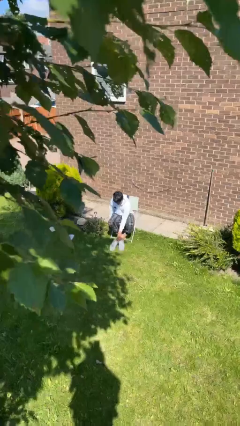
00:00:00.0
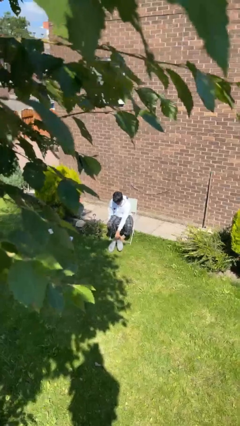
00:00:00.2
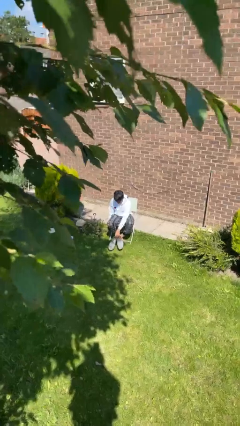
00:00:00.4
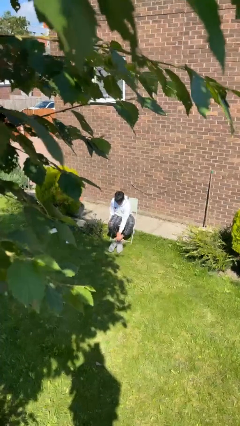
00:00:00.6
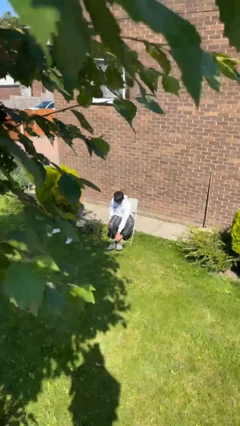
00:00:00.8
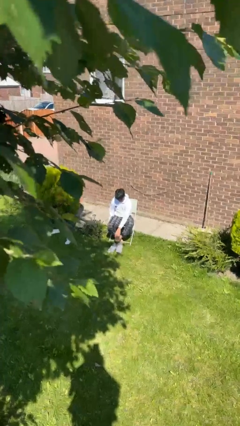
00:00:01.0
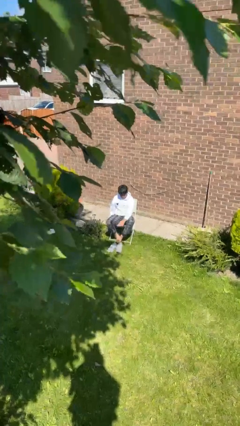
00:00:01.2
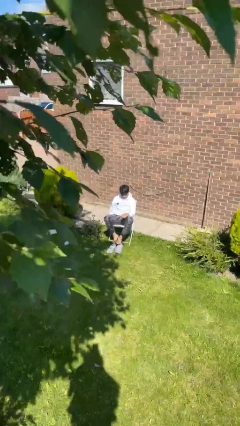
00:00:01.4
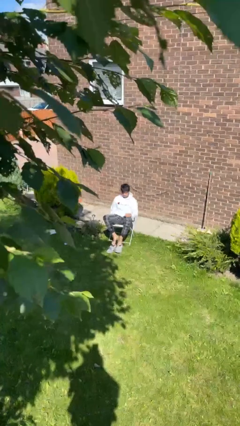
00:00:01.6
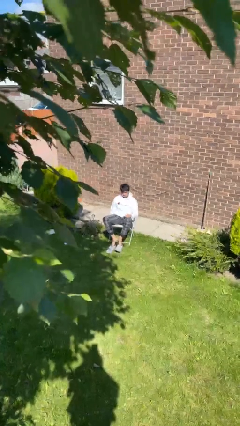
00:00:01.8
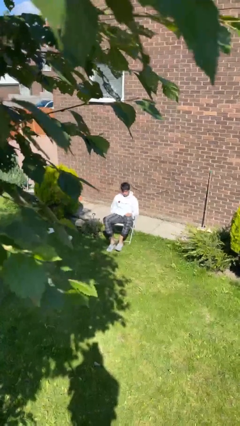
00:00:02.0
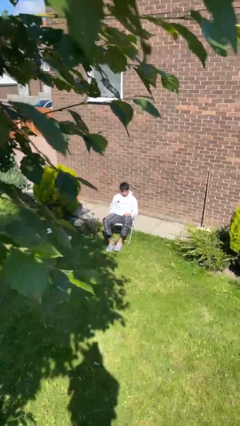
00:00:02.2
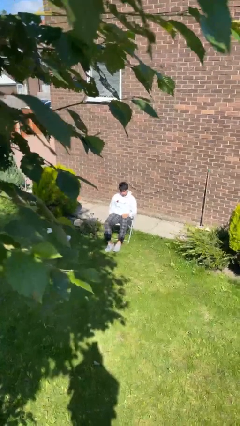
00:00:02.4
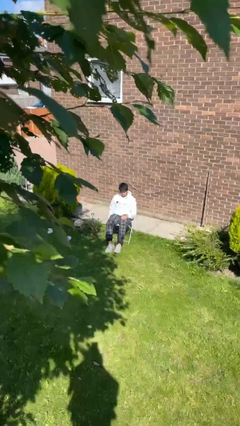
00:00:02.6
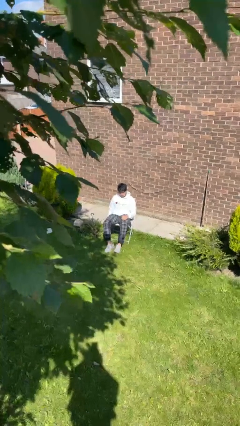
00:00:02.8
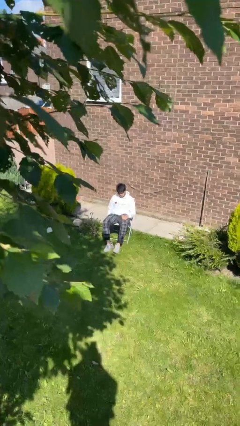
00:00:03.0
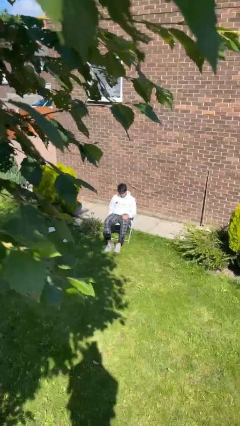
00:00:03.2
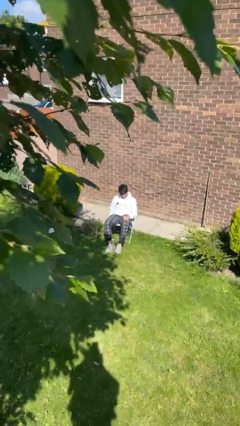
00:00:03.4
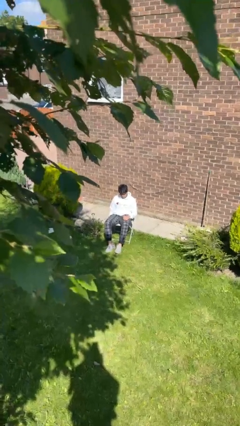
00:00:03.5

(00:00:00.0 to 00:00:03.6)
person puts on shoes

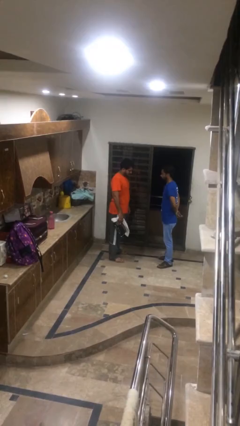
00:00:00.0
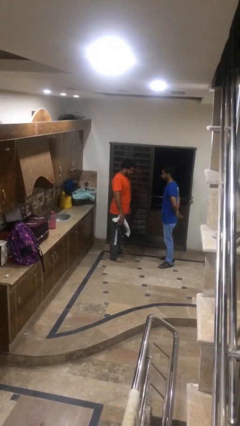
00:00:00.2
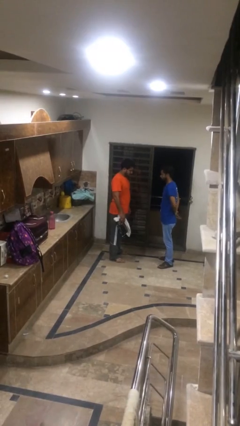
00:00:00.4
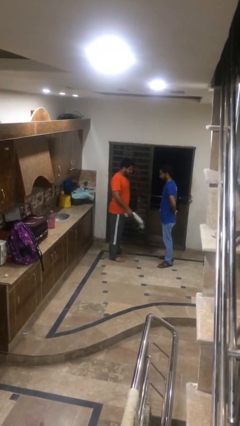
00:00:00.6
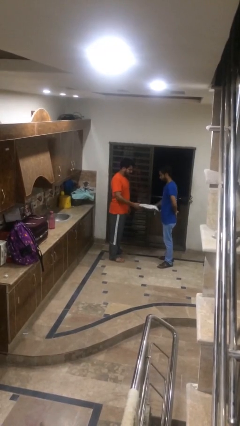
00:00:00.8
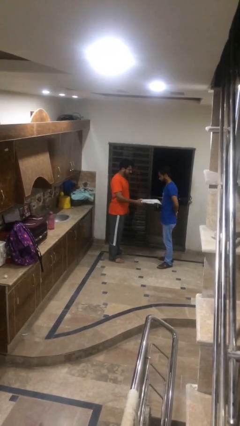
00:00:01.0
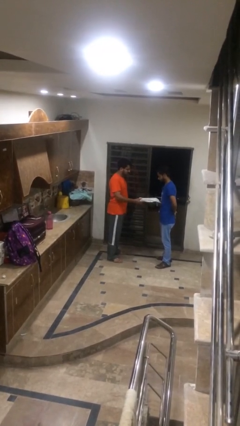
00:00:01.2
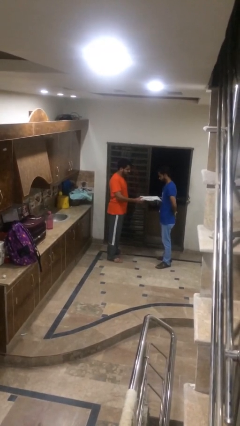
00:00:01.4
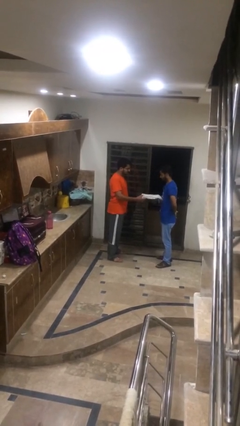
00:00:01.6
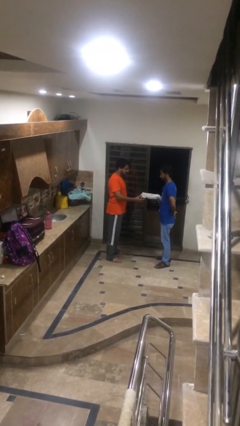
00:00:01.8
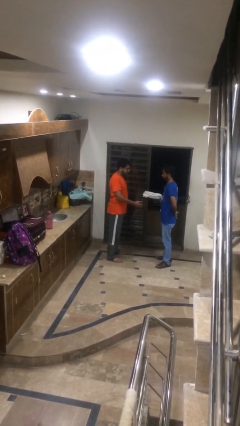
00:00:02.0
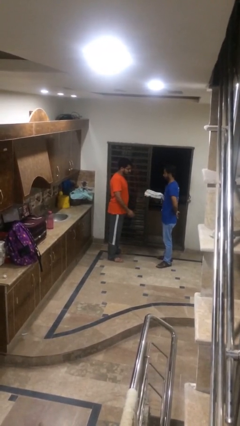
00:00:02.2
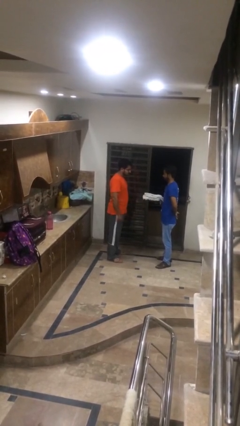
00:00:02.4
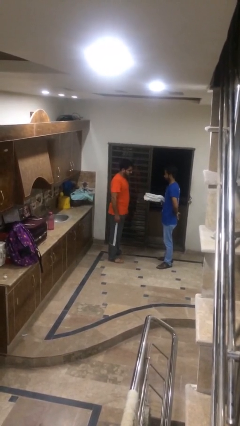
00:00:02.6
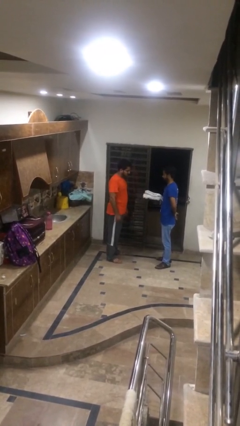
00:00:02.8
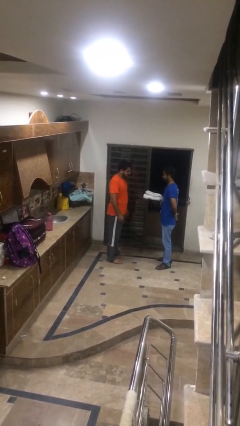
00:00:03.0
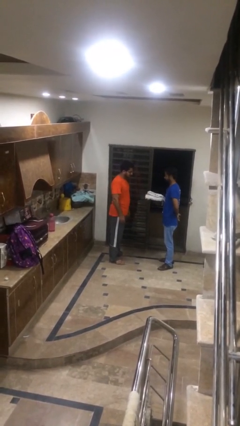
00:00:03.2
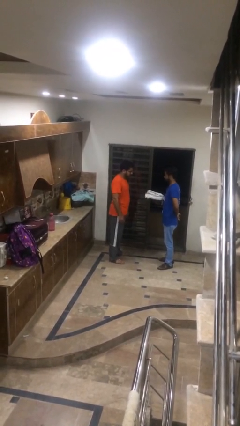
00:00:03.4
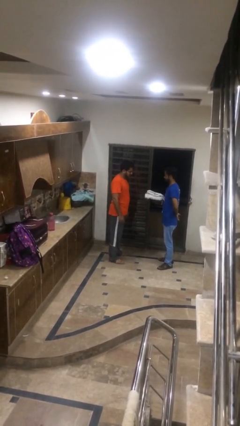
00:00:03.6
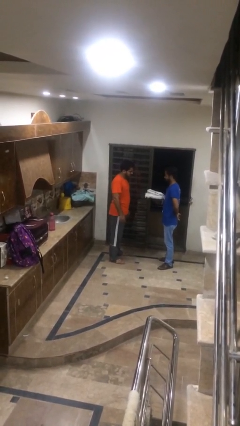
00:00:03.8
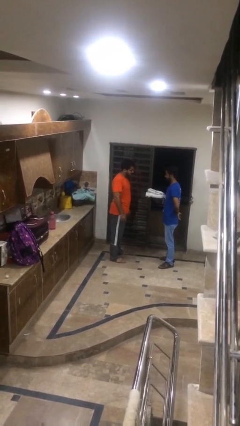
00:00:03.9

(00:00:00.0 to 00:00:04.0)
person transfers object to person

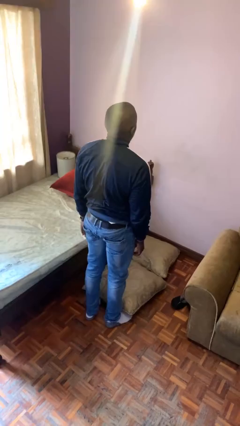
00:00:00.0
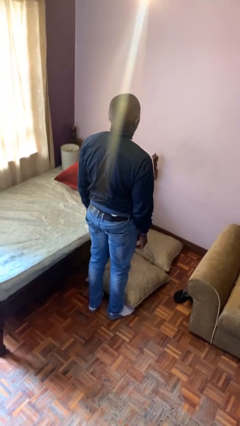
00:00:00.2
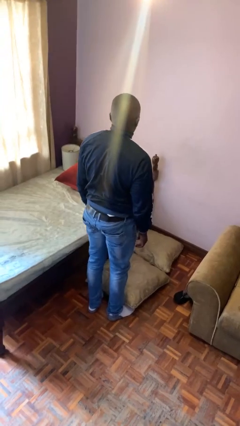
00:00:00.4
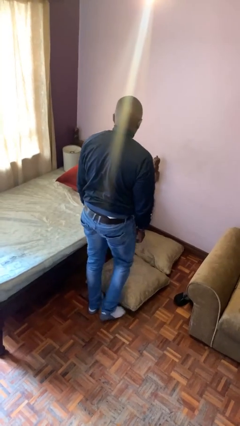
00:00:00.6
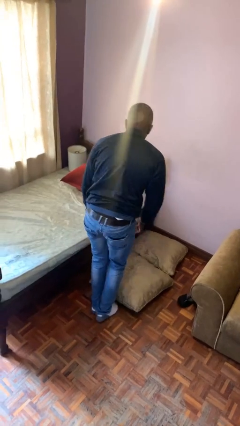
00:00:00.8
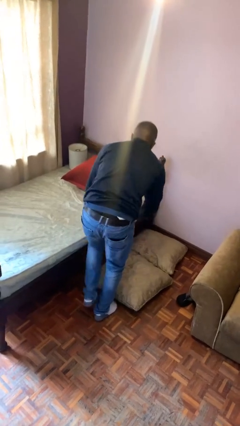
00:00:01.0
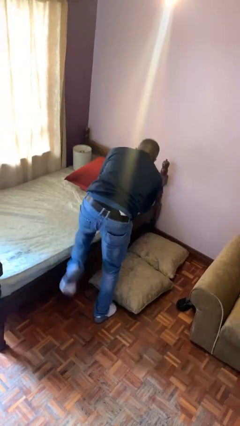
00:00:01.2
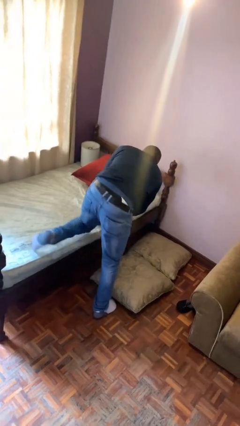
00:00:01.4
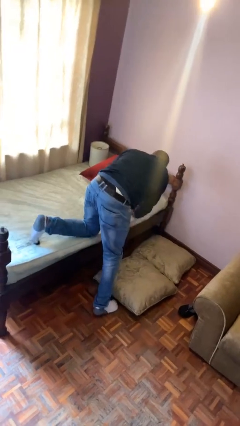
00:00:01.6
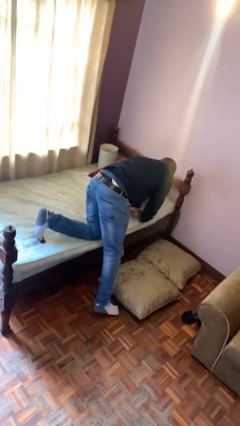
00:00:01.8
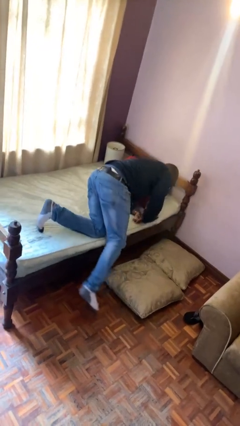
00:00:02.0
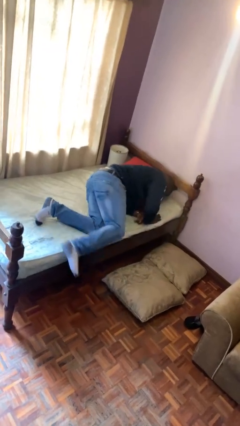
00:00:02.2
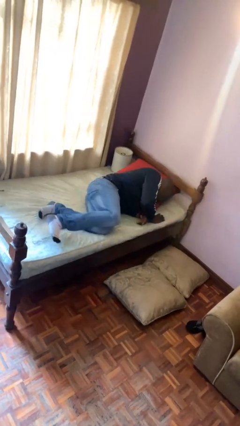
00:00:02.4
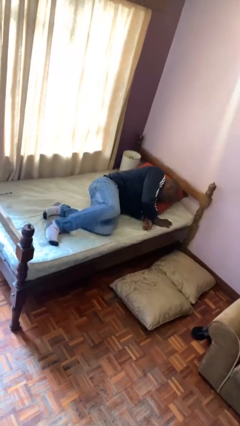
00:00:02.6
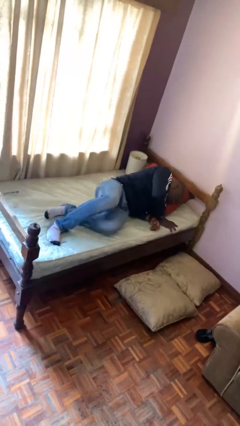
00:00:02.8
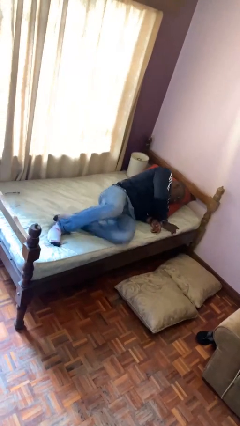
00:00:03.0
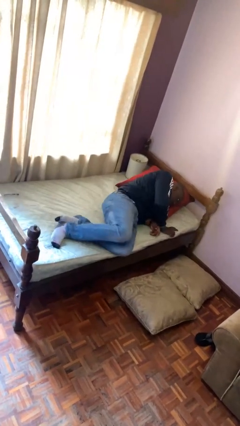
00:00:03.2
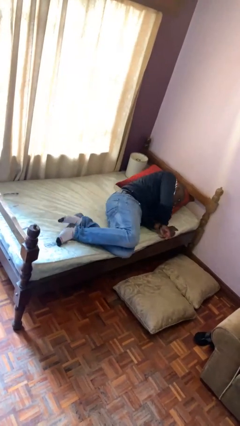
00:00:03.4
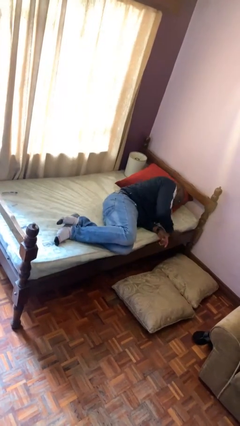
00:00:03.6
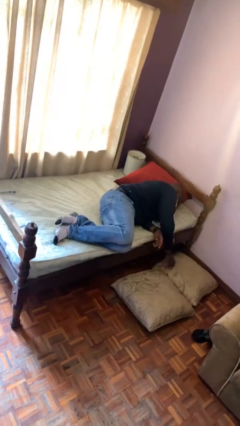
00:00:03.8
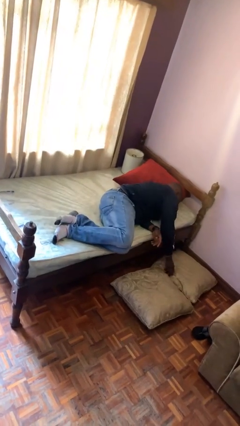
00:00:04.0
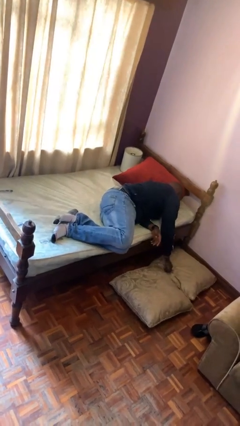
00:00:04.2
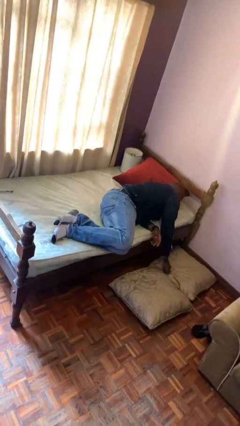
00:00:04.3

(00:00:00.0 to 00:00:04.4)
person lies down on bed

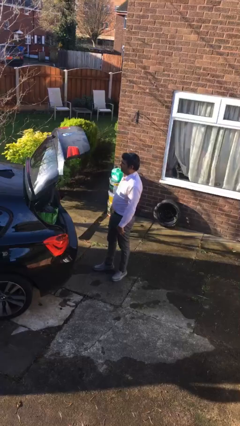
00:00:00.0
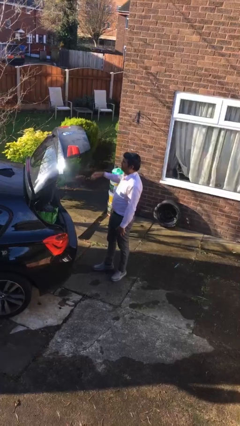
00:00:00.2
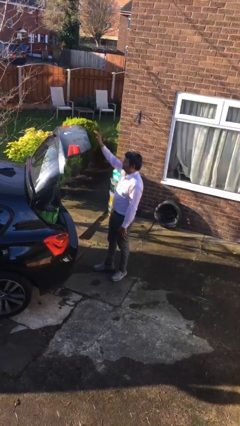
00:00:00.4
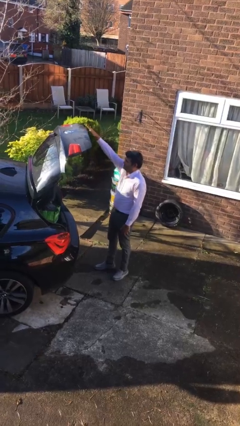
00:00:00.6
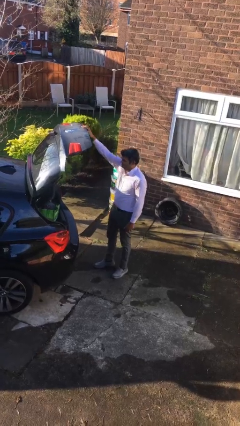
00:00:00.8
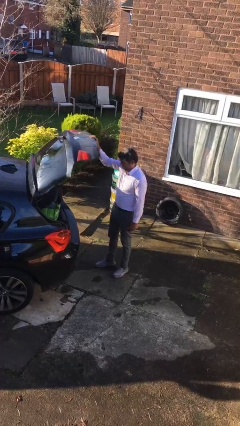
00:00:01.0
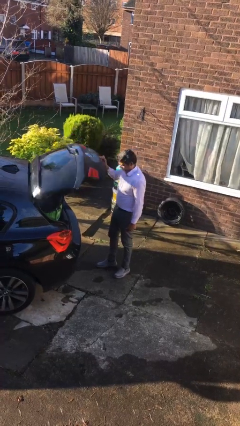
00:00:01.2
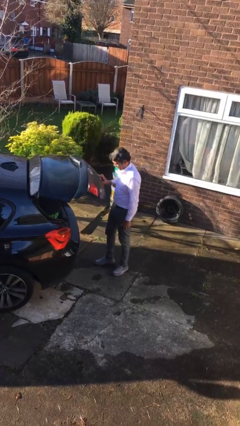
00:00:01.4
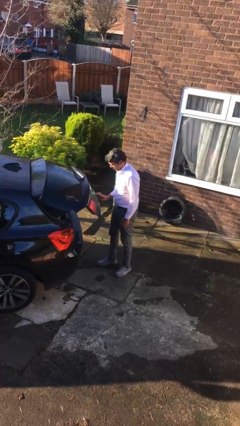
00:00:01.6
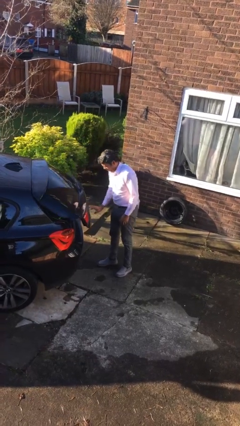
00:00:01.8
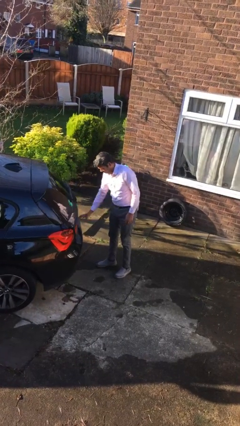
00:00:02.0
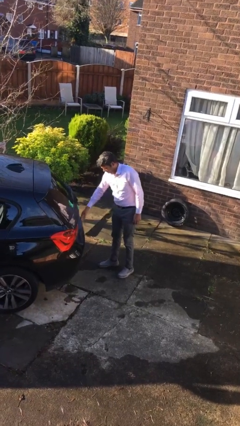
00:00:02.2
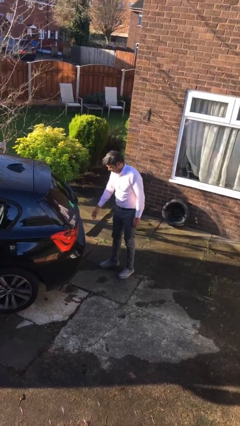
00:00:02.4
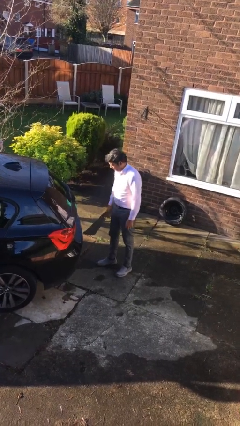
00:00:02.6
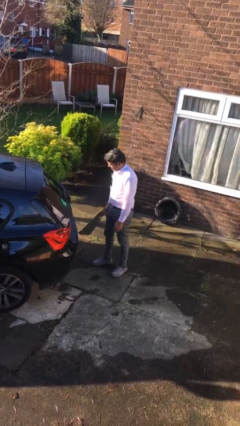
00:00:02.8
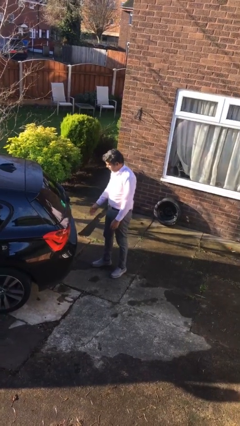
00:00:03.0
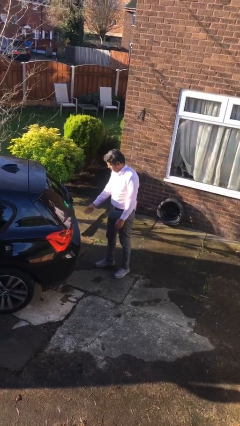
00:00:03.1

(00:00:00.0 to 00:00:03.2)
person closes car trunk

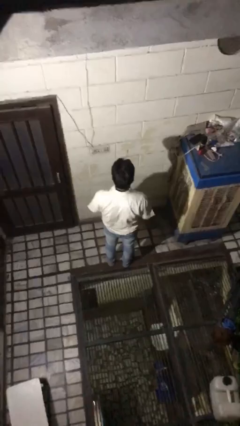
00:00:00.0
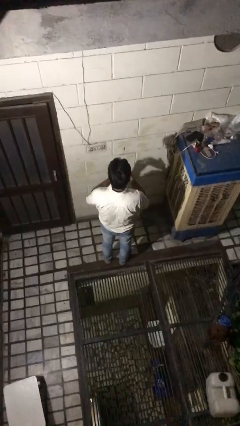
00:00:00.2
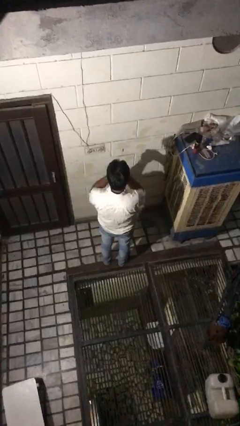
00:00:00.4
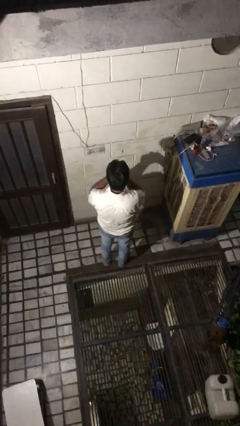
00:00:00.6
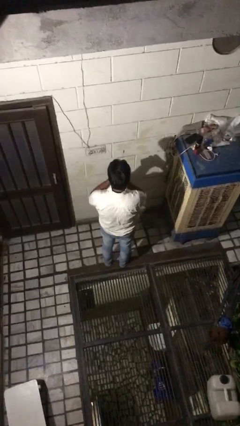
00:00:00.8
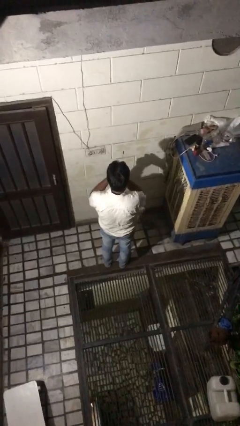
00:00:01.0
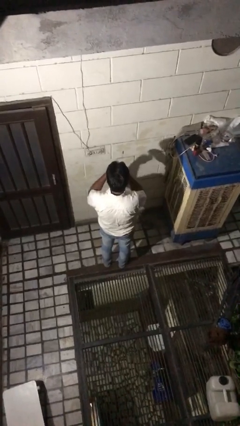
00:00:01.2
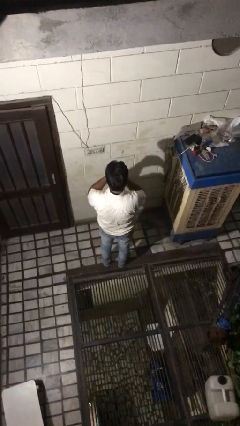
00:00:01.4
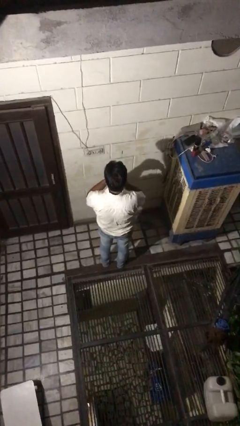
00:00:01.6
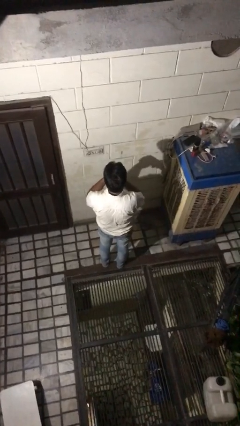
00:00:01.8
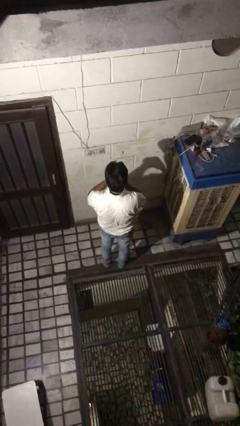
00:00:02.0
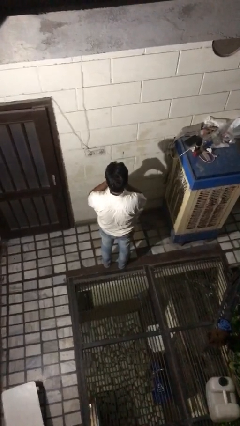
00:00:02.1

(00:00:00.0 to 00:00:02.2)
person snaps fingers

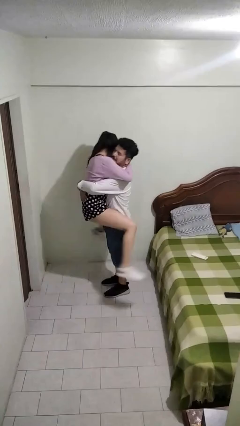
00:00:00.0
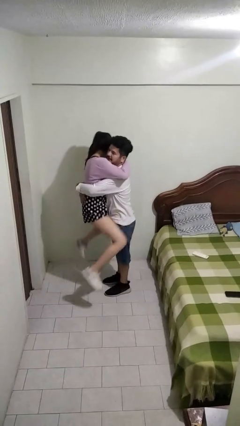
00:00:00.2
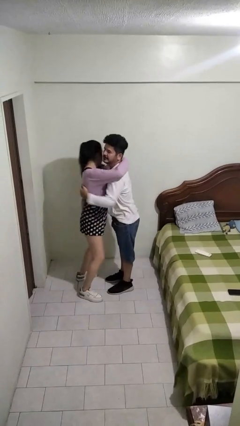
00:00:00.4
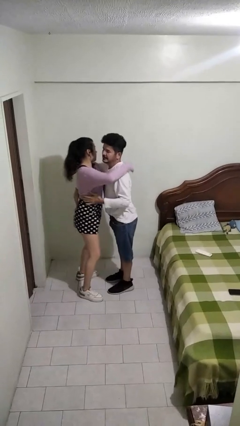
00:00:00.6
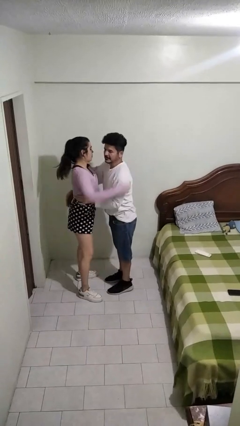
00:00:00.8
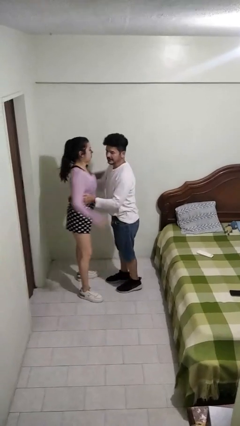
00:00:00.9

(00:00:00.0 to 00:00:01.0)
person puts down person
